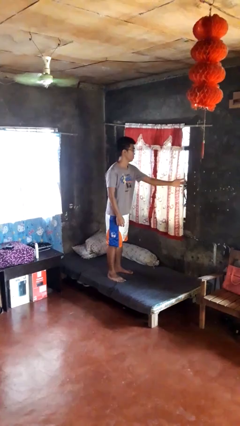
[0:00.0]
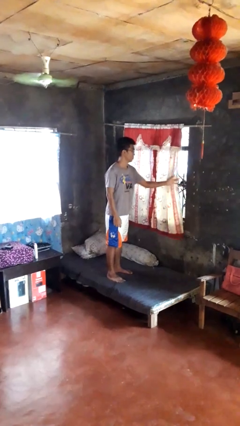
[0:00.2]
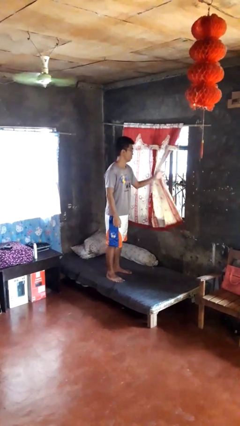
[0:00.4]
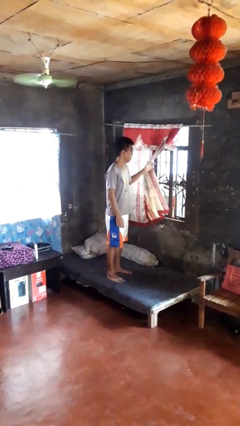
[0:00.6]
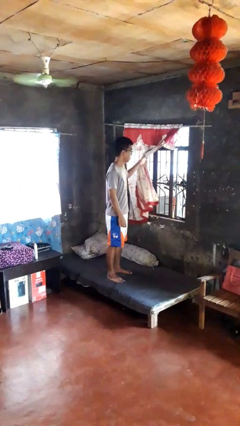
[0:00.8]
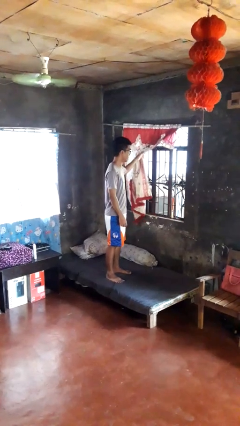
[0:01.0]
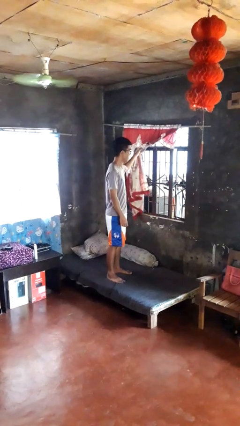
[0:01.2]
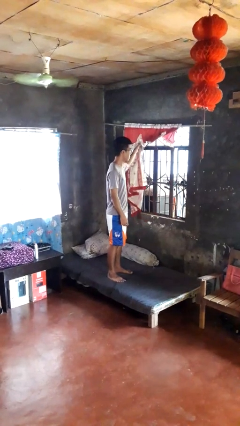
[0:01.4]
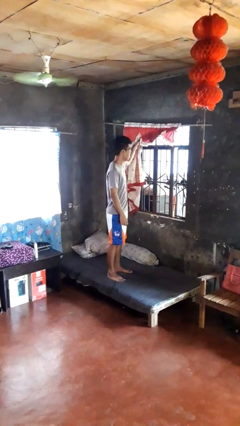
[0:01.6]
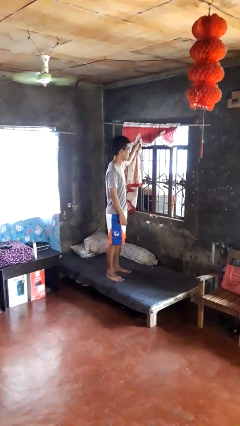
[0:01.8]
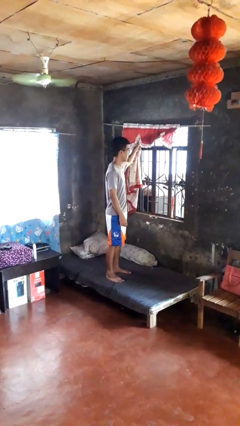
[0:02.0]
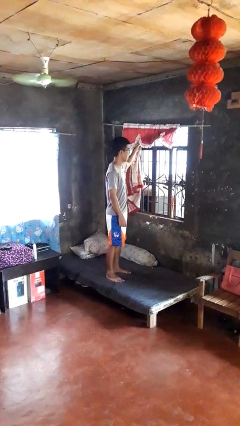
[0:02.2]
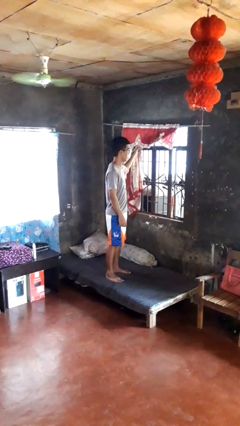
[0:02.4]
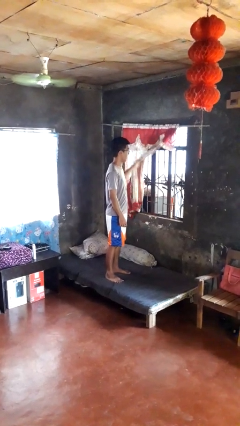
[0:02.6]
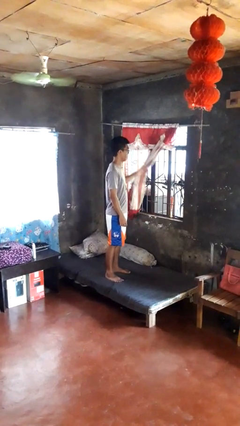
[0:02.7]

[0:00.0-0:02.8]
person opens curtains

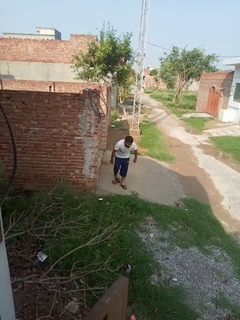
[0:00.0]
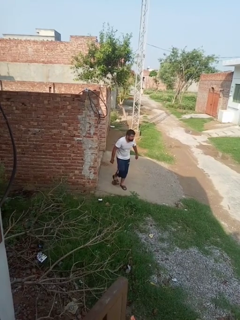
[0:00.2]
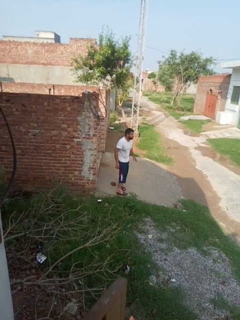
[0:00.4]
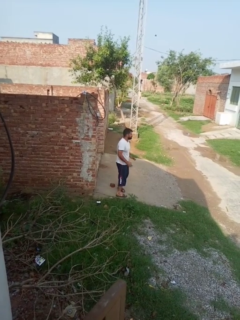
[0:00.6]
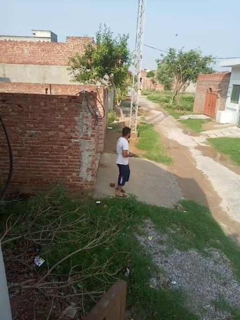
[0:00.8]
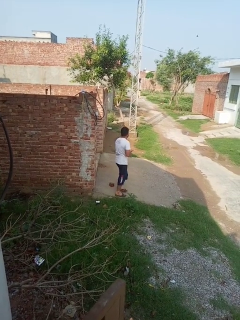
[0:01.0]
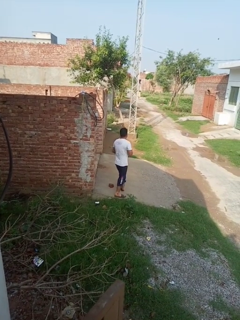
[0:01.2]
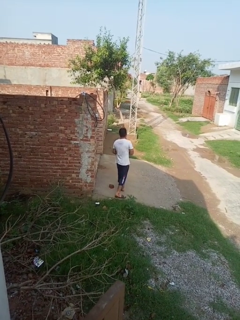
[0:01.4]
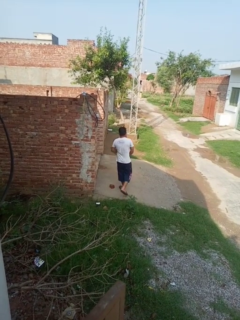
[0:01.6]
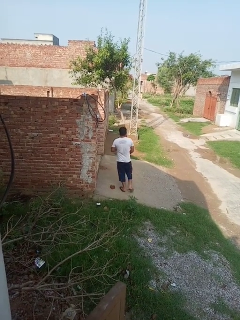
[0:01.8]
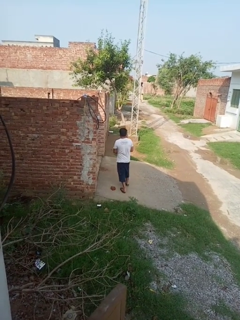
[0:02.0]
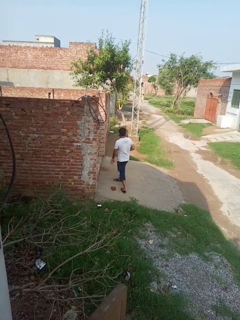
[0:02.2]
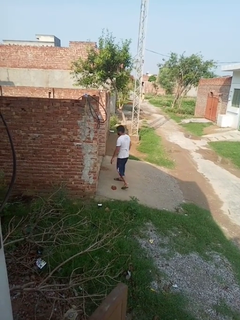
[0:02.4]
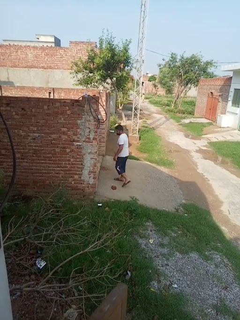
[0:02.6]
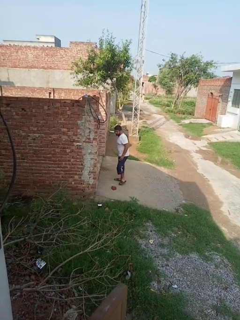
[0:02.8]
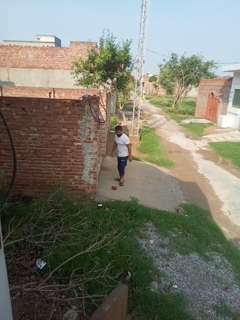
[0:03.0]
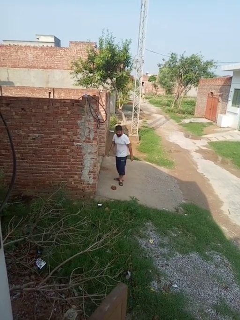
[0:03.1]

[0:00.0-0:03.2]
person stands up from floor

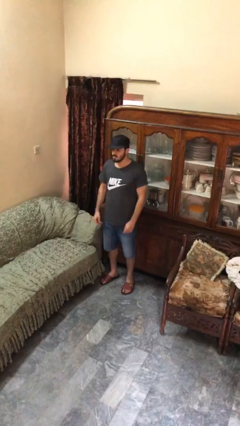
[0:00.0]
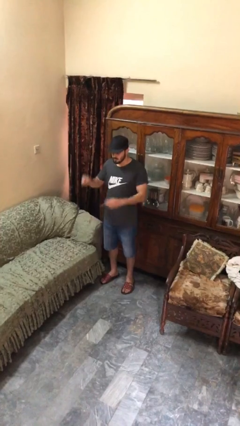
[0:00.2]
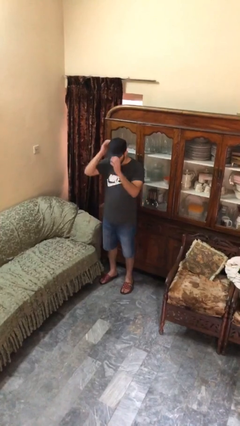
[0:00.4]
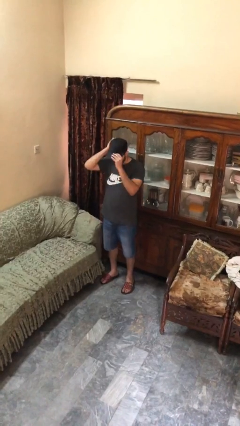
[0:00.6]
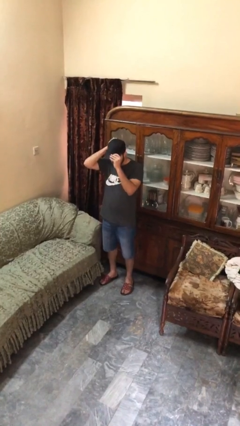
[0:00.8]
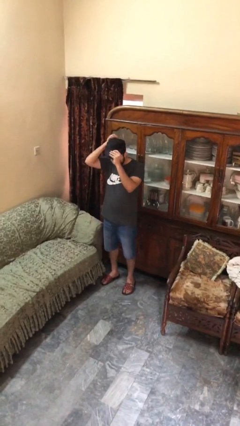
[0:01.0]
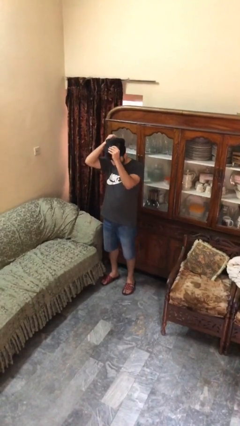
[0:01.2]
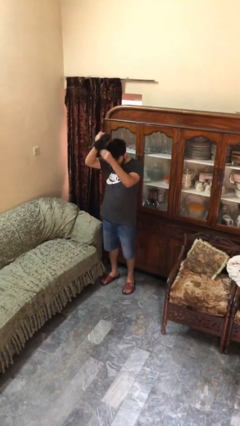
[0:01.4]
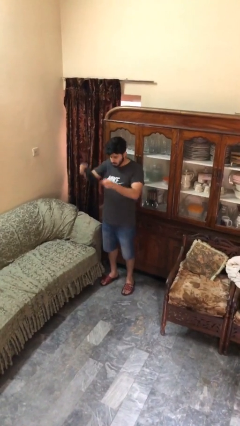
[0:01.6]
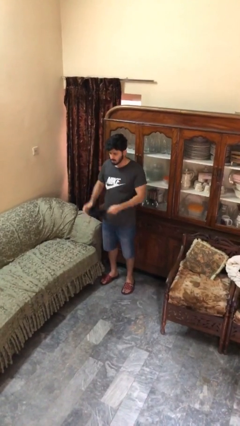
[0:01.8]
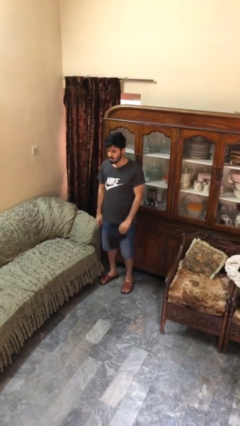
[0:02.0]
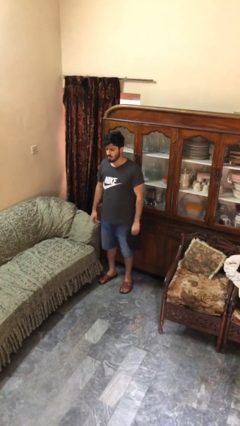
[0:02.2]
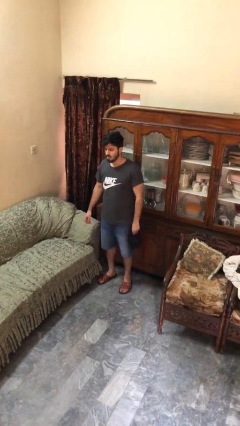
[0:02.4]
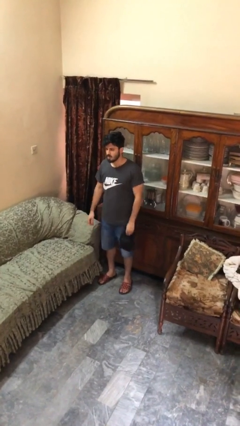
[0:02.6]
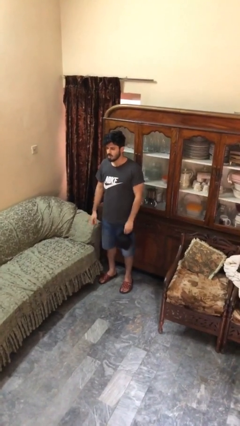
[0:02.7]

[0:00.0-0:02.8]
person takes off hat

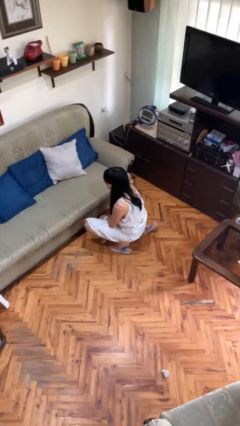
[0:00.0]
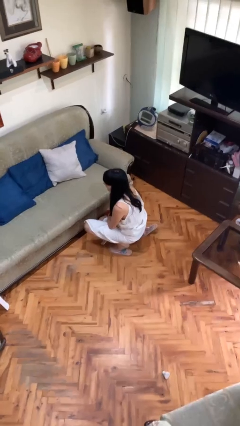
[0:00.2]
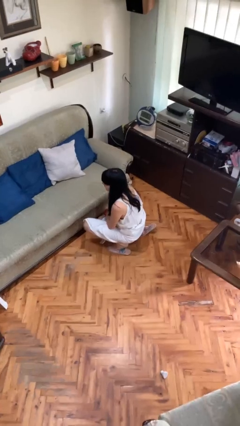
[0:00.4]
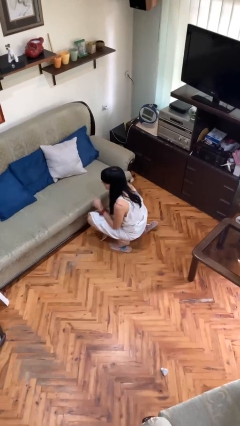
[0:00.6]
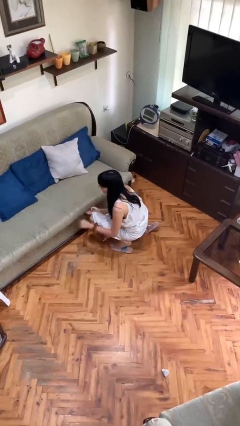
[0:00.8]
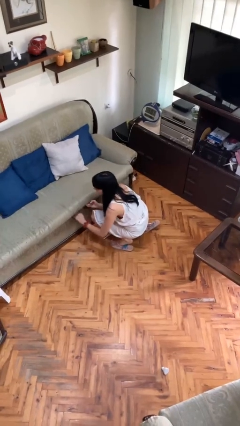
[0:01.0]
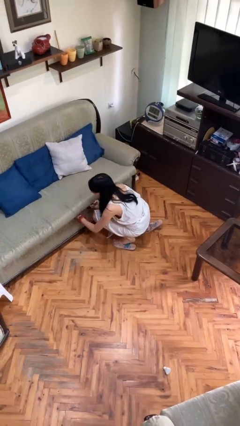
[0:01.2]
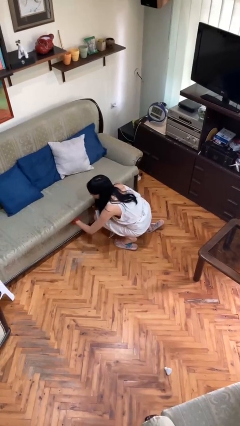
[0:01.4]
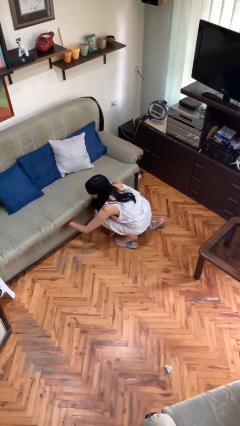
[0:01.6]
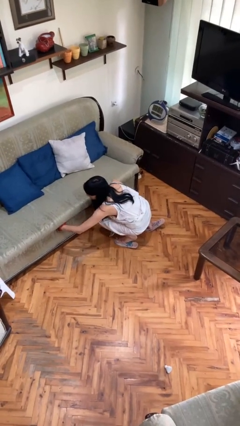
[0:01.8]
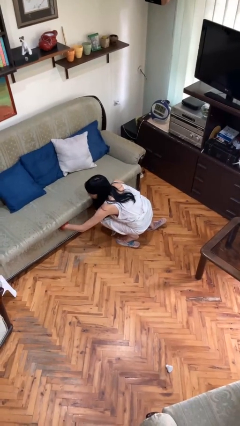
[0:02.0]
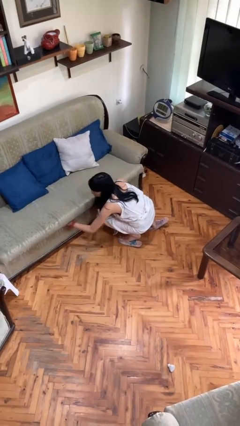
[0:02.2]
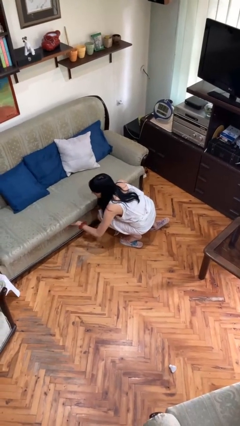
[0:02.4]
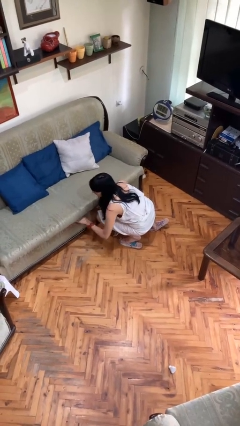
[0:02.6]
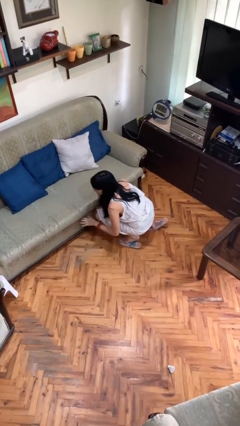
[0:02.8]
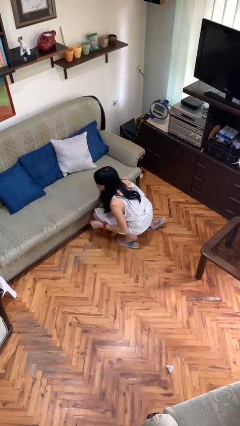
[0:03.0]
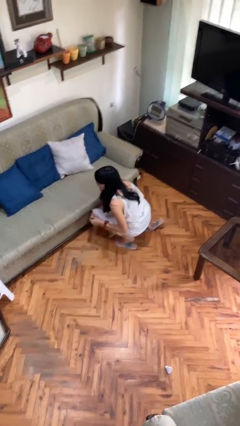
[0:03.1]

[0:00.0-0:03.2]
person searches under couch

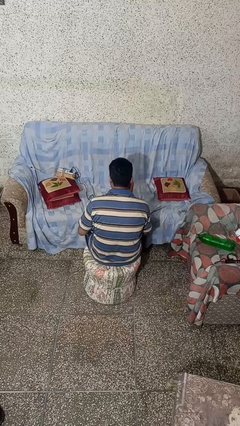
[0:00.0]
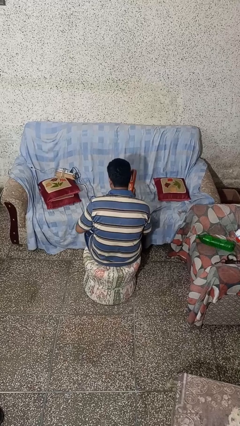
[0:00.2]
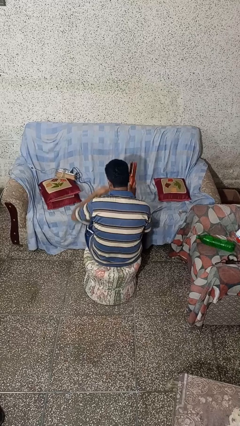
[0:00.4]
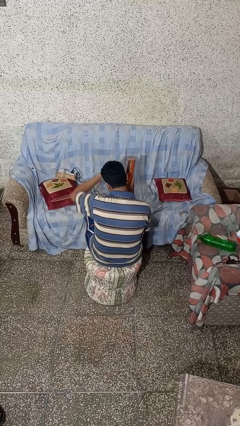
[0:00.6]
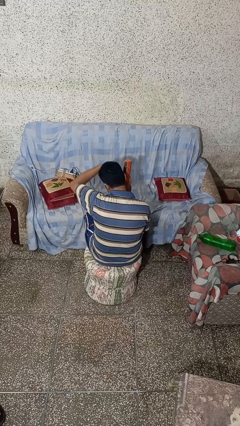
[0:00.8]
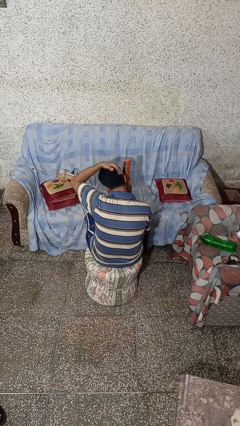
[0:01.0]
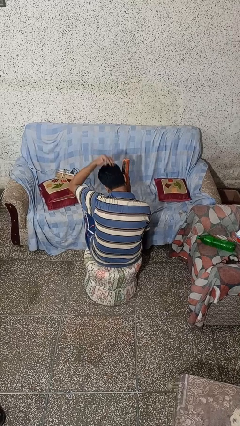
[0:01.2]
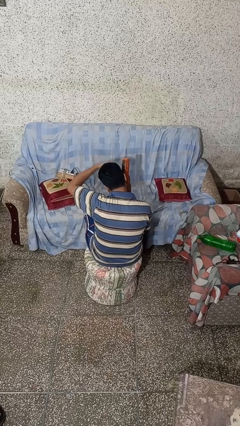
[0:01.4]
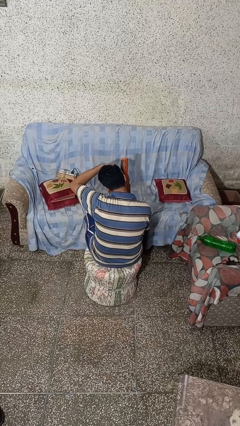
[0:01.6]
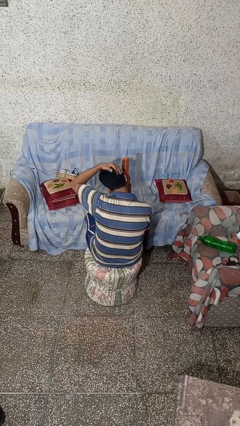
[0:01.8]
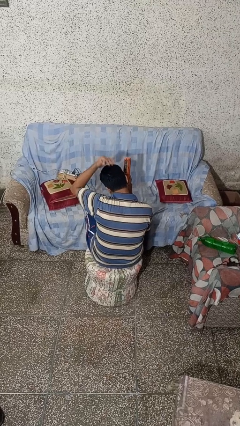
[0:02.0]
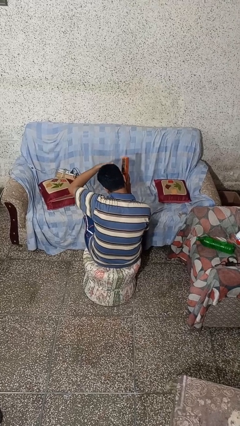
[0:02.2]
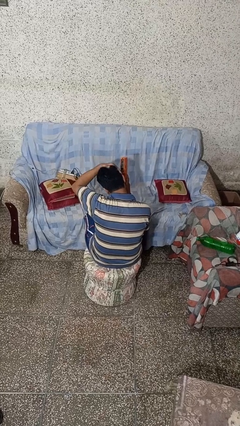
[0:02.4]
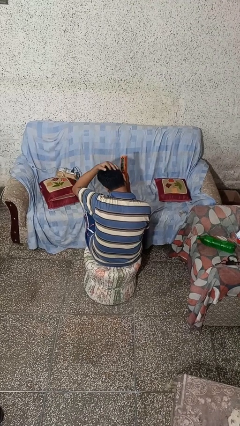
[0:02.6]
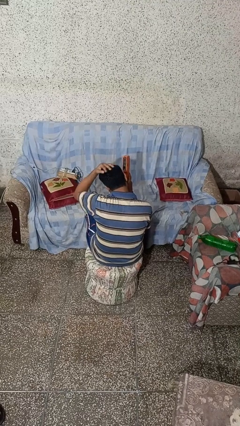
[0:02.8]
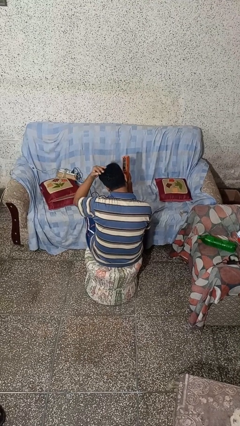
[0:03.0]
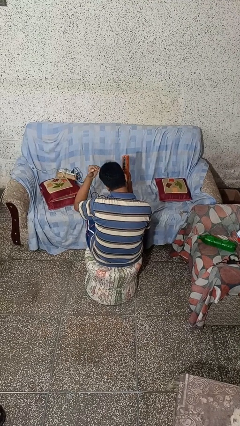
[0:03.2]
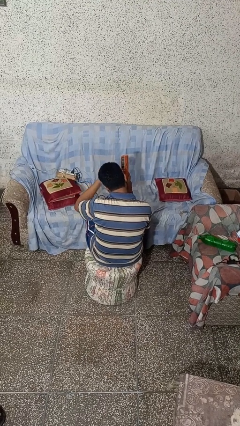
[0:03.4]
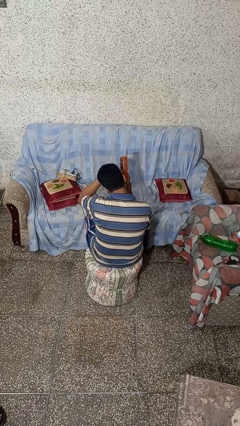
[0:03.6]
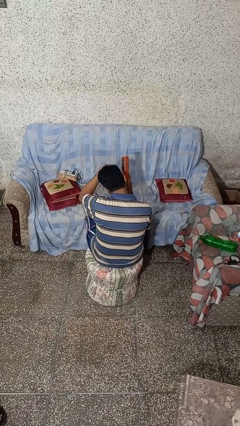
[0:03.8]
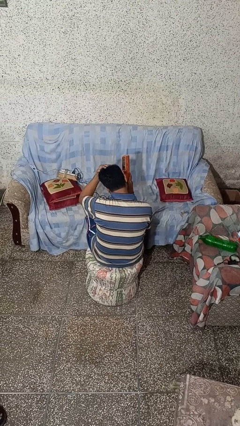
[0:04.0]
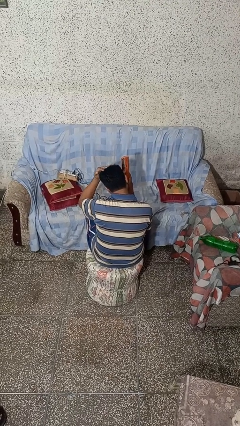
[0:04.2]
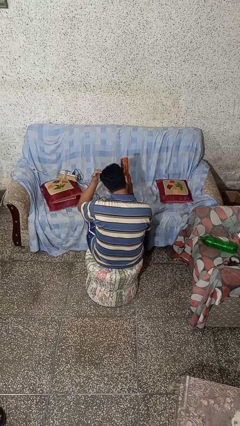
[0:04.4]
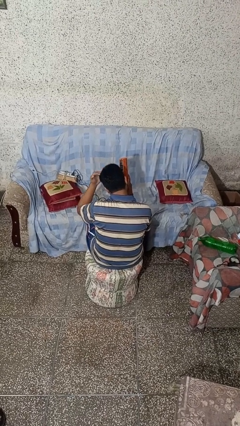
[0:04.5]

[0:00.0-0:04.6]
person dries hair with hairdryer

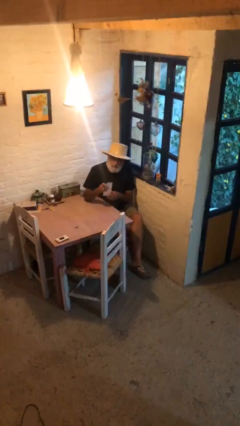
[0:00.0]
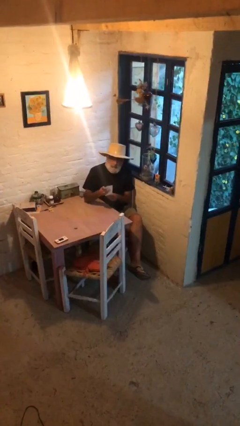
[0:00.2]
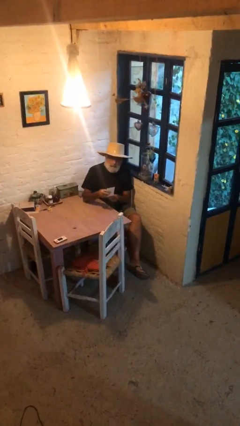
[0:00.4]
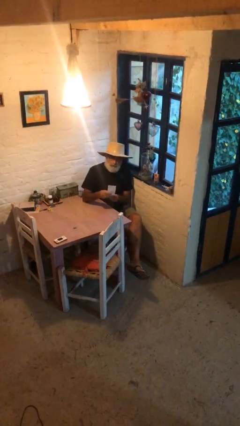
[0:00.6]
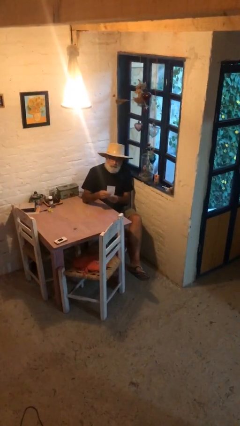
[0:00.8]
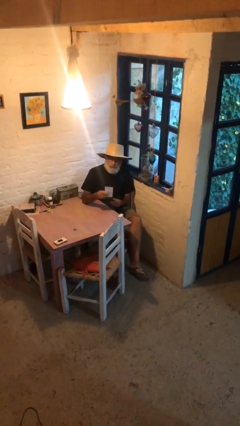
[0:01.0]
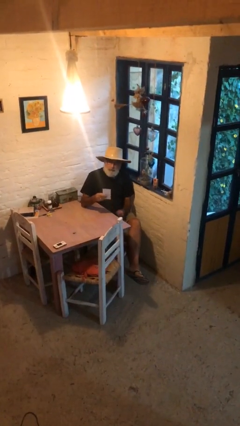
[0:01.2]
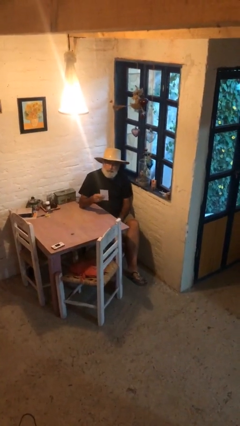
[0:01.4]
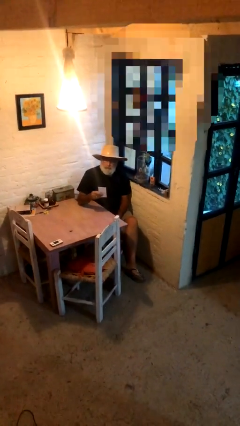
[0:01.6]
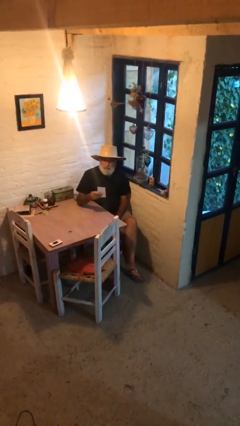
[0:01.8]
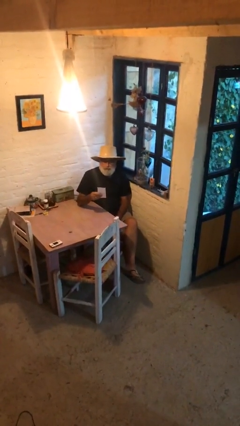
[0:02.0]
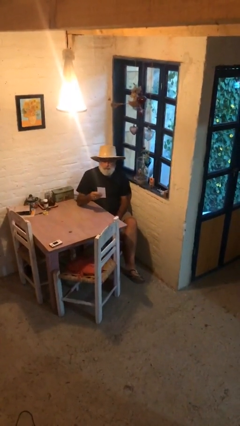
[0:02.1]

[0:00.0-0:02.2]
person reads document
